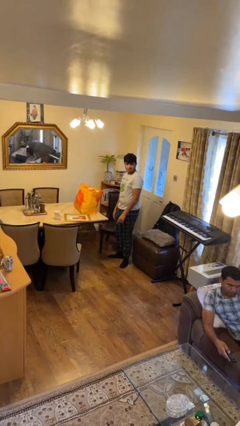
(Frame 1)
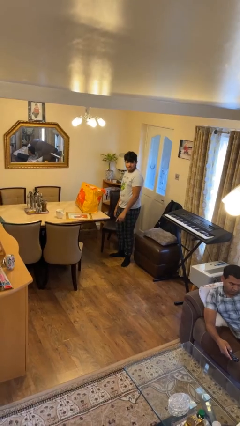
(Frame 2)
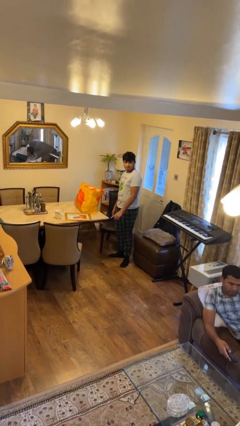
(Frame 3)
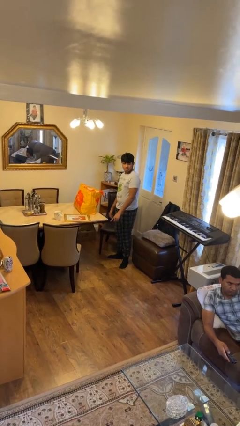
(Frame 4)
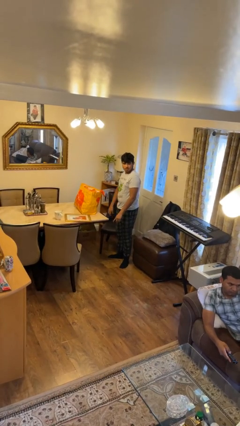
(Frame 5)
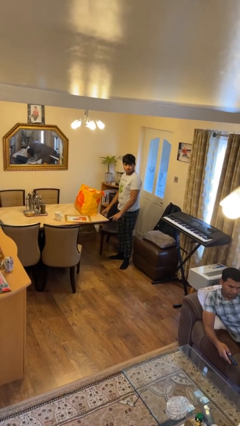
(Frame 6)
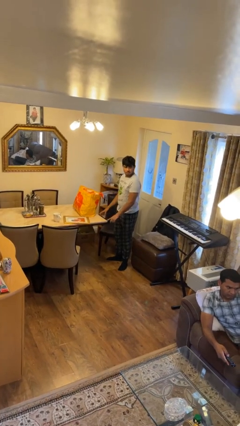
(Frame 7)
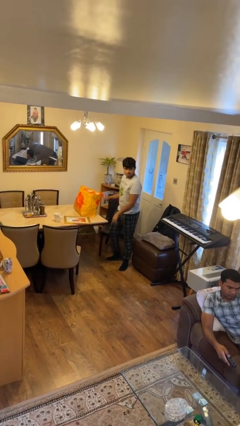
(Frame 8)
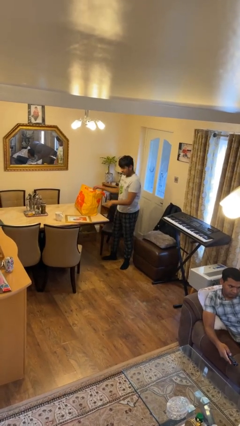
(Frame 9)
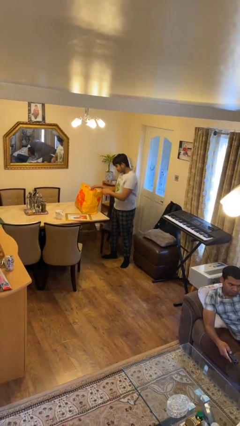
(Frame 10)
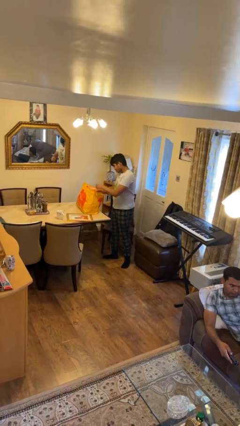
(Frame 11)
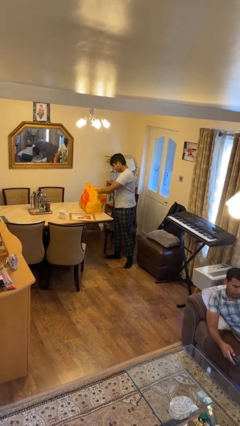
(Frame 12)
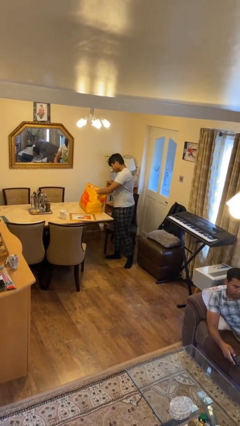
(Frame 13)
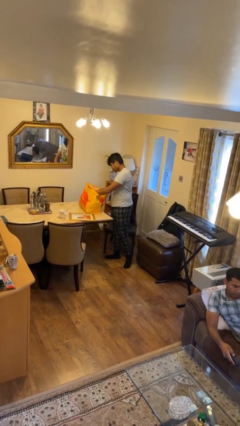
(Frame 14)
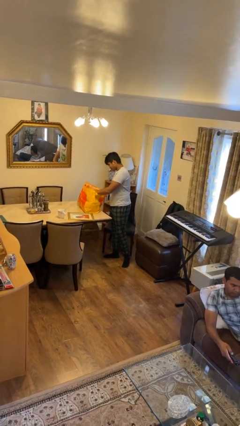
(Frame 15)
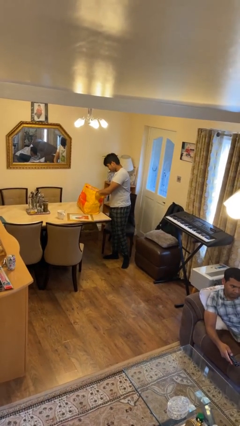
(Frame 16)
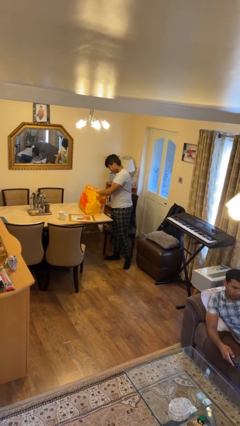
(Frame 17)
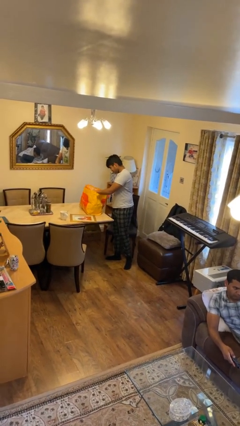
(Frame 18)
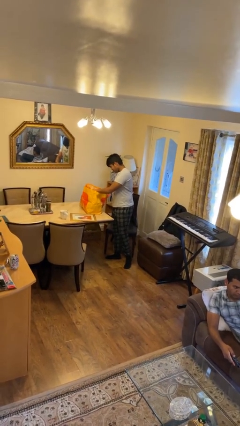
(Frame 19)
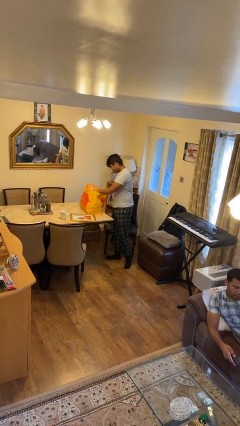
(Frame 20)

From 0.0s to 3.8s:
person searches in bag

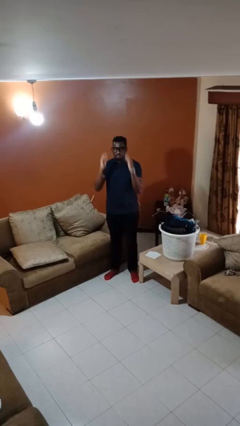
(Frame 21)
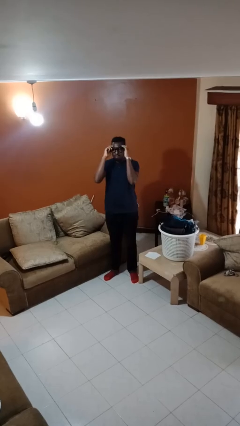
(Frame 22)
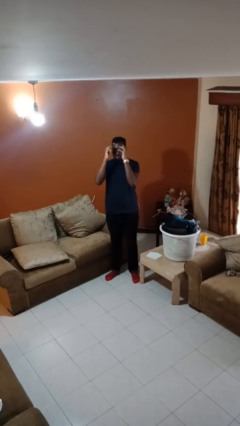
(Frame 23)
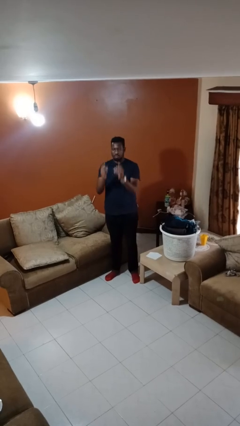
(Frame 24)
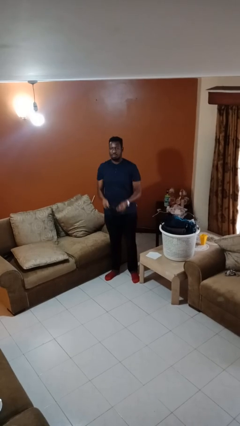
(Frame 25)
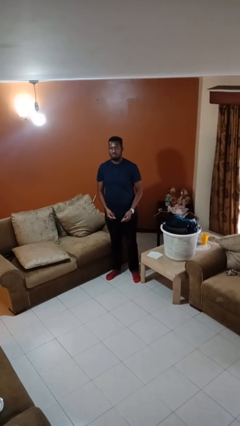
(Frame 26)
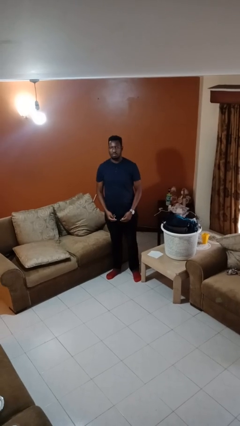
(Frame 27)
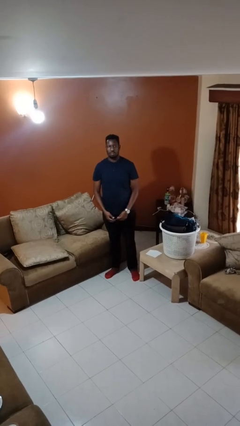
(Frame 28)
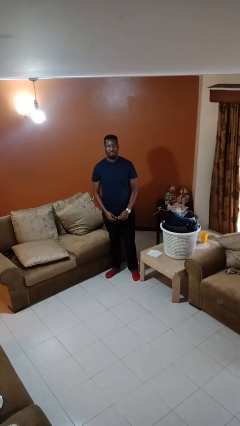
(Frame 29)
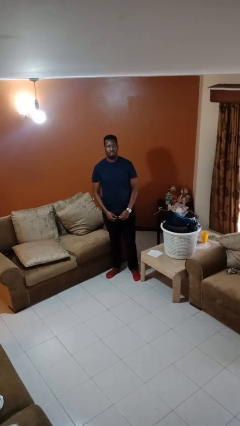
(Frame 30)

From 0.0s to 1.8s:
person takes off glasses

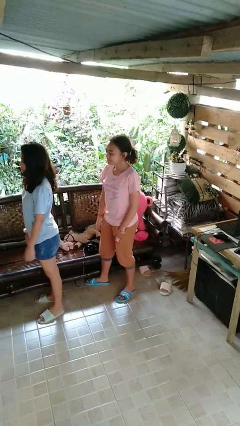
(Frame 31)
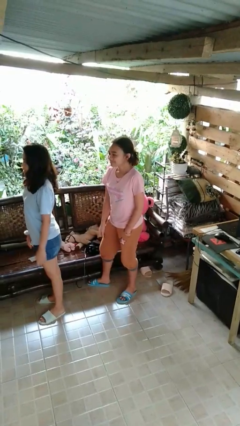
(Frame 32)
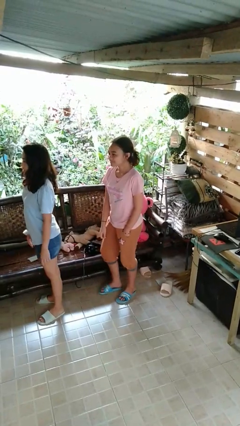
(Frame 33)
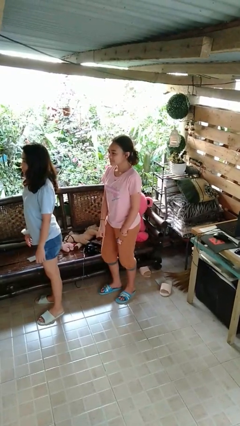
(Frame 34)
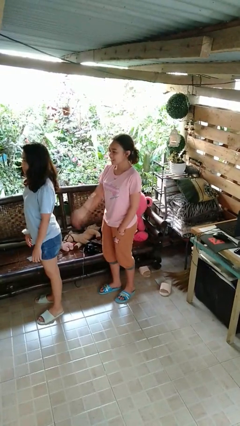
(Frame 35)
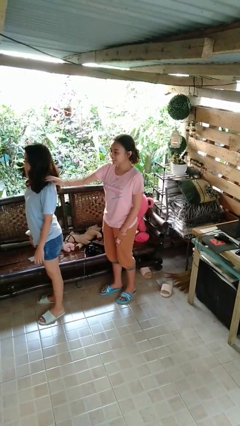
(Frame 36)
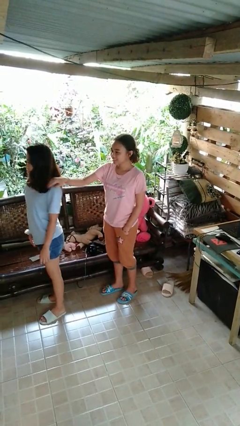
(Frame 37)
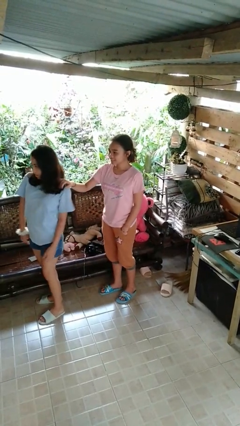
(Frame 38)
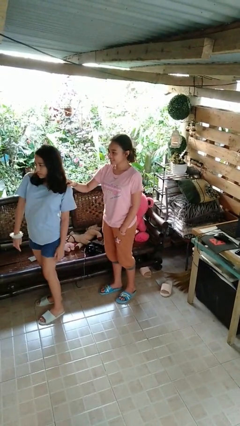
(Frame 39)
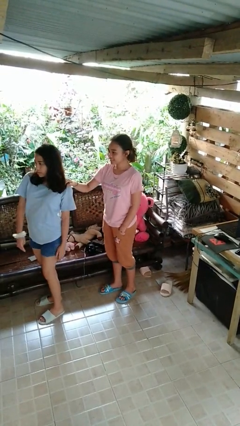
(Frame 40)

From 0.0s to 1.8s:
person grabs person by shoulder

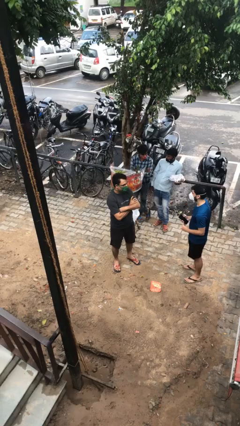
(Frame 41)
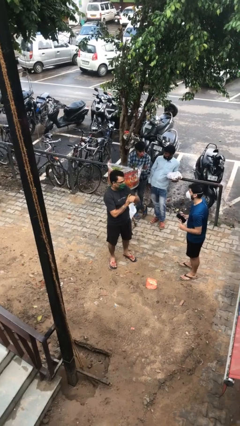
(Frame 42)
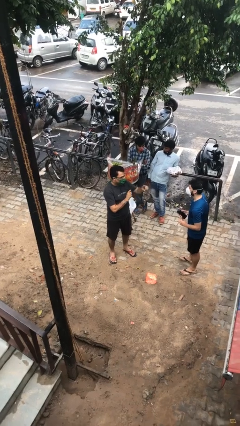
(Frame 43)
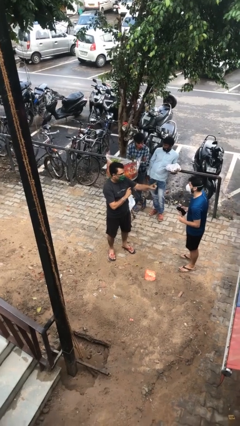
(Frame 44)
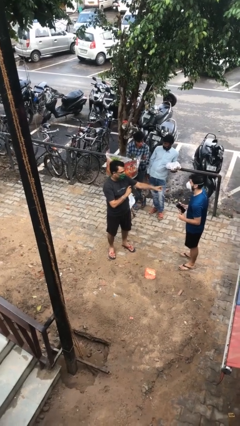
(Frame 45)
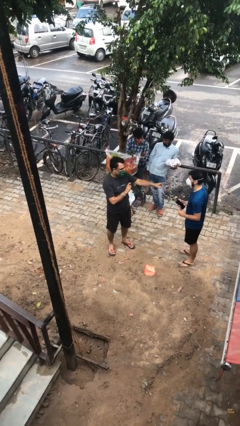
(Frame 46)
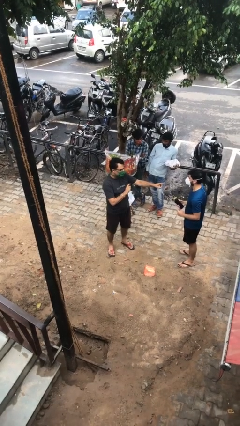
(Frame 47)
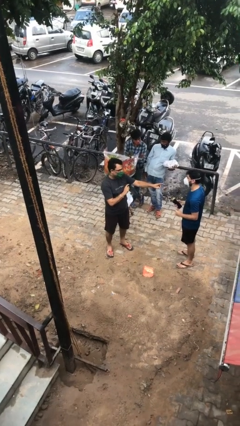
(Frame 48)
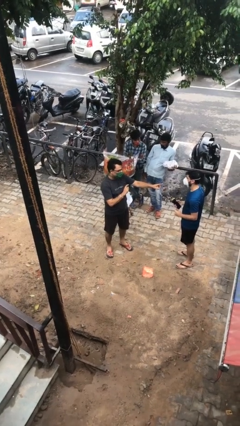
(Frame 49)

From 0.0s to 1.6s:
person points at person

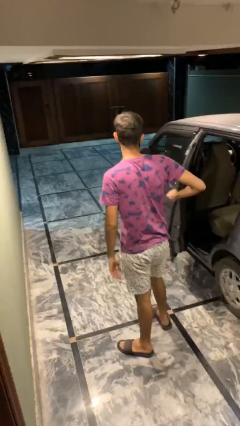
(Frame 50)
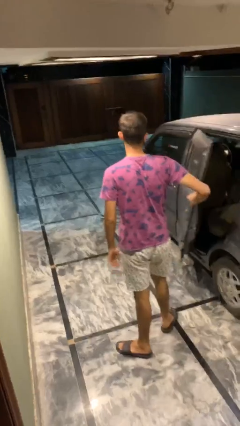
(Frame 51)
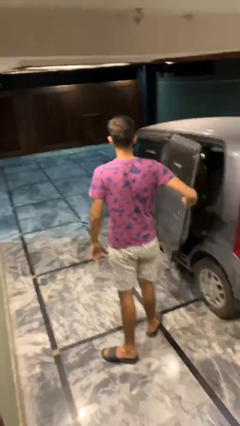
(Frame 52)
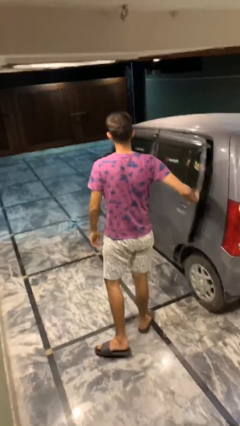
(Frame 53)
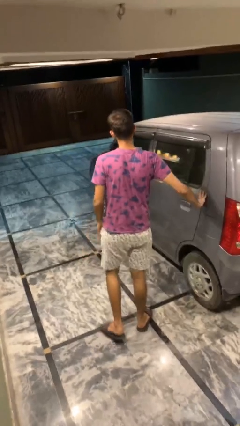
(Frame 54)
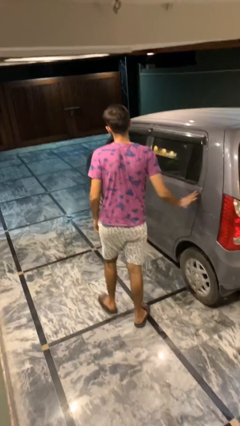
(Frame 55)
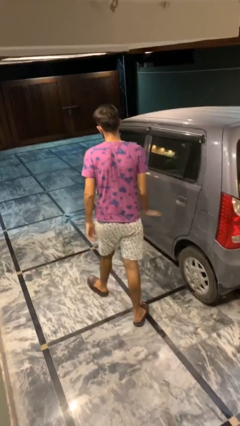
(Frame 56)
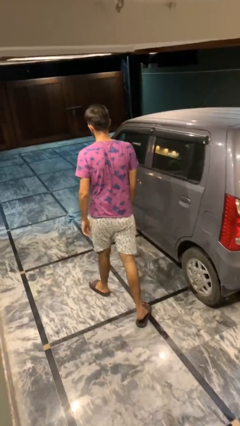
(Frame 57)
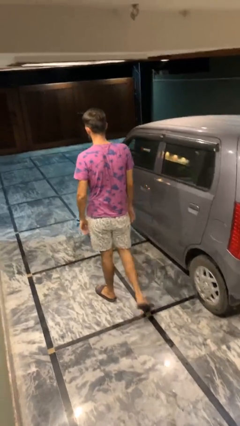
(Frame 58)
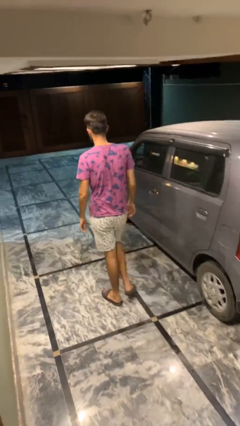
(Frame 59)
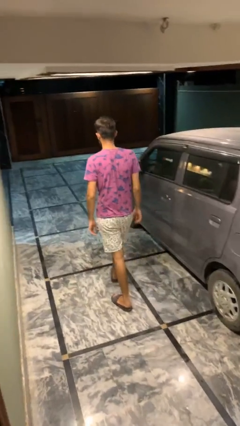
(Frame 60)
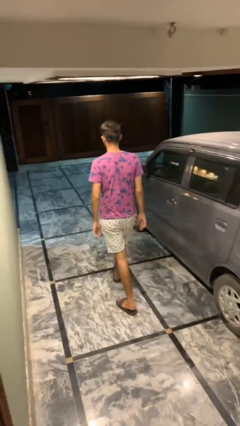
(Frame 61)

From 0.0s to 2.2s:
person closes car door

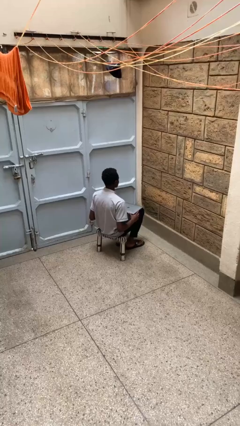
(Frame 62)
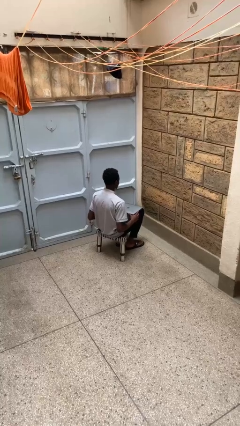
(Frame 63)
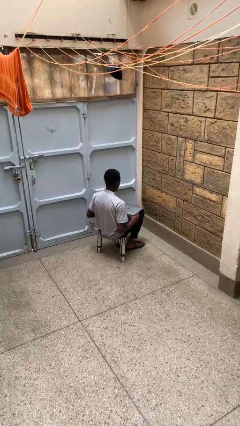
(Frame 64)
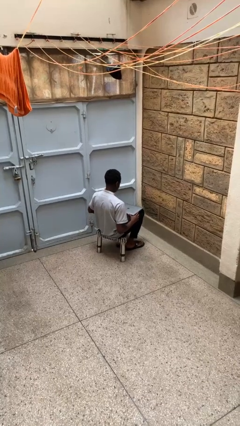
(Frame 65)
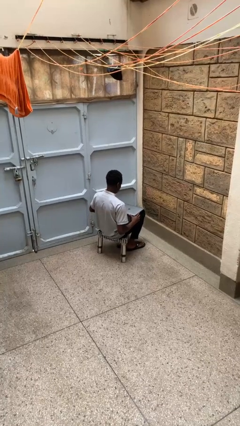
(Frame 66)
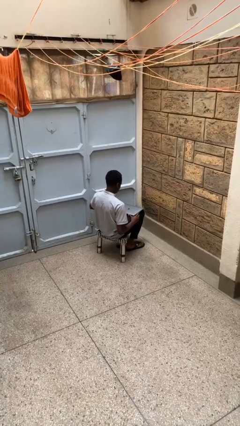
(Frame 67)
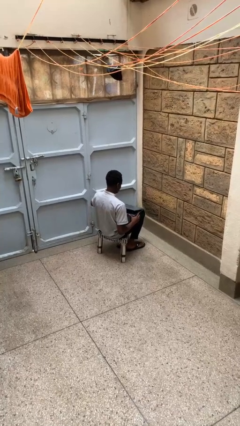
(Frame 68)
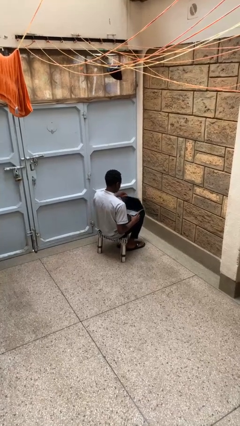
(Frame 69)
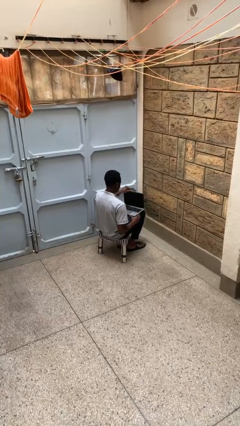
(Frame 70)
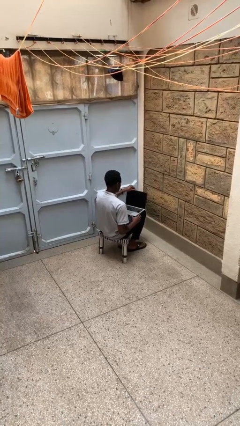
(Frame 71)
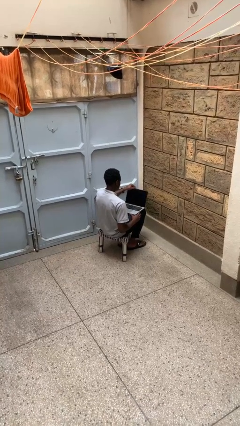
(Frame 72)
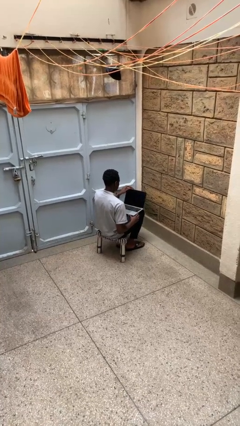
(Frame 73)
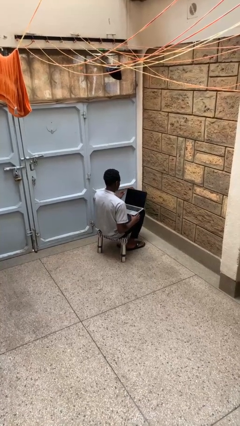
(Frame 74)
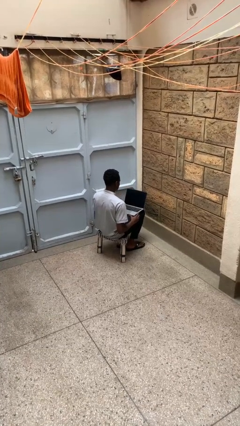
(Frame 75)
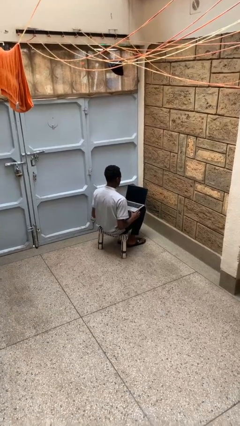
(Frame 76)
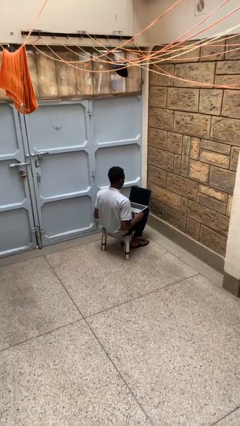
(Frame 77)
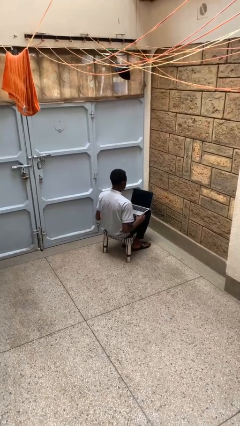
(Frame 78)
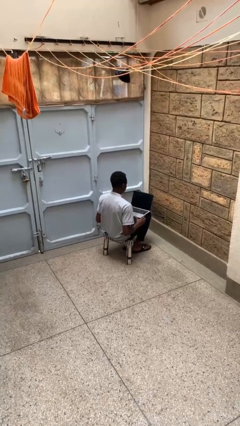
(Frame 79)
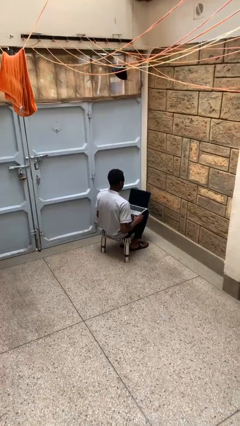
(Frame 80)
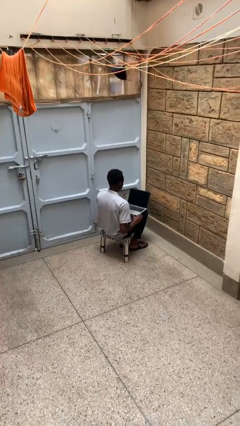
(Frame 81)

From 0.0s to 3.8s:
person opens laptop

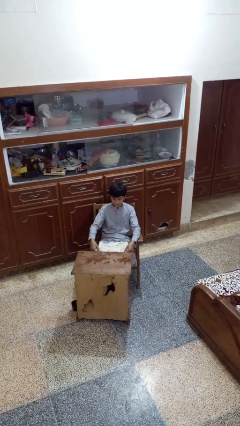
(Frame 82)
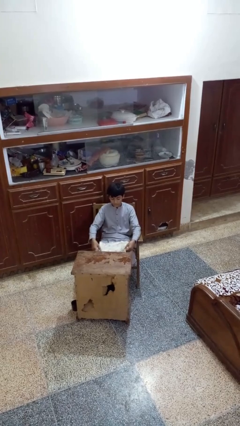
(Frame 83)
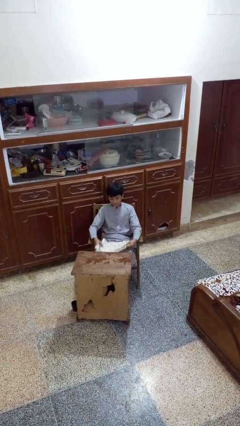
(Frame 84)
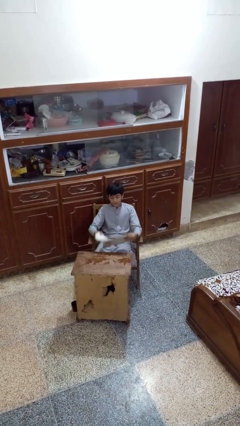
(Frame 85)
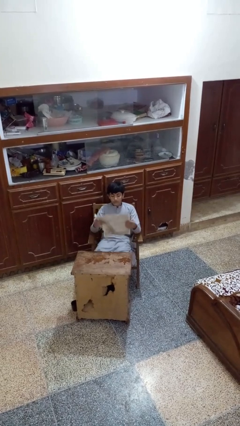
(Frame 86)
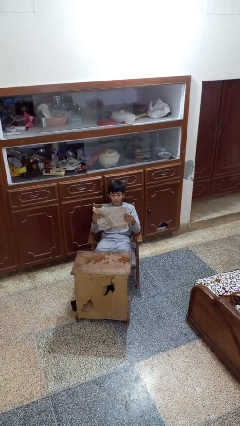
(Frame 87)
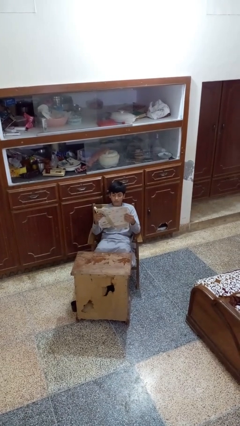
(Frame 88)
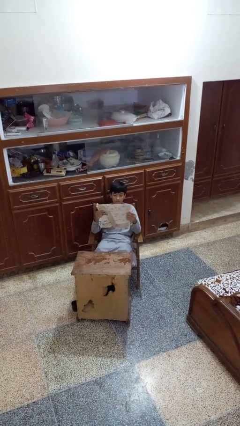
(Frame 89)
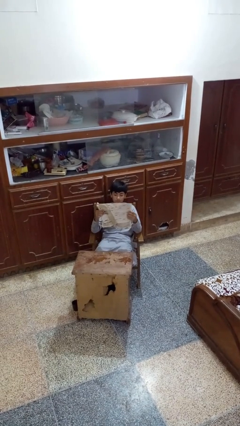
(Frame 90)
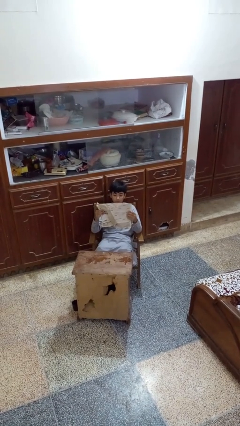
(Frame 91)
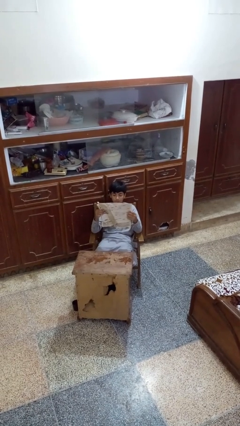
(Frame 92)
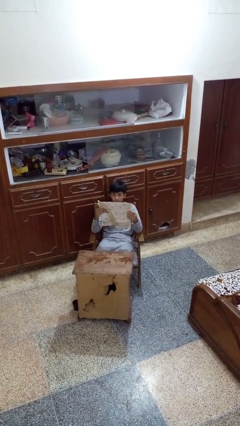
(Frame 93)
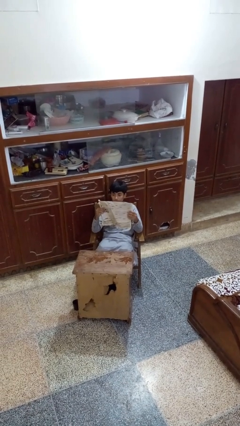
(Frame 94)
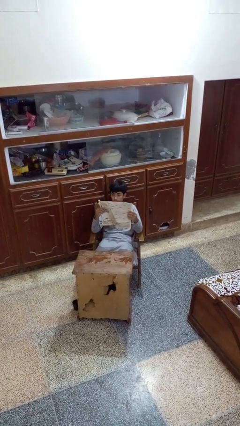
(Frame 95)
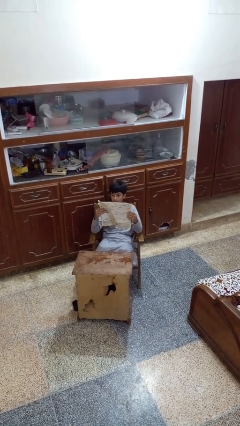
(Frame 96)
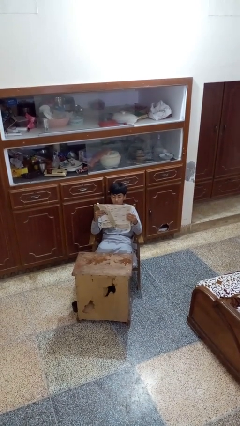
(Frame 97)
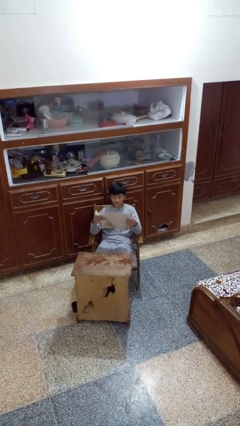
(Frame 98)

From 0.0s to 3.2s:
person reads newspaper
